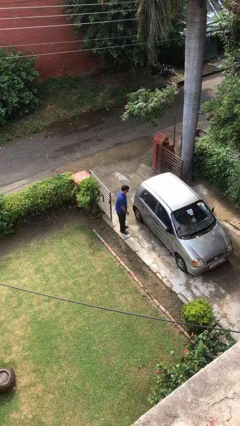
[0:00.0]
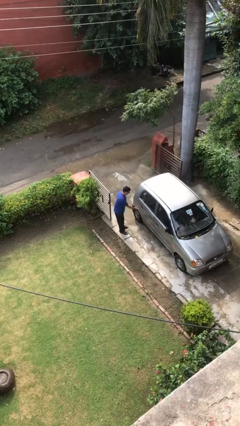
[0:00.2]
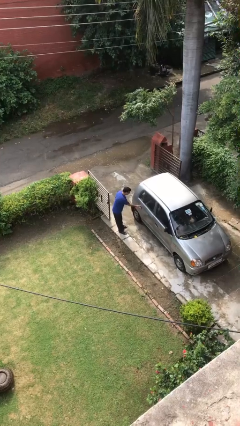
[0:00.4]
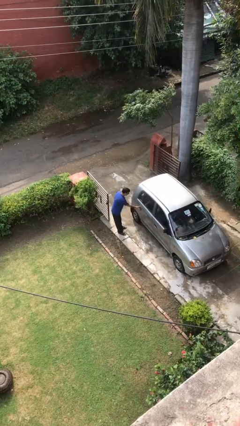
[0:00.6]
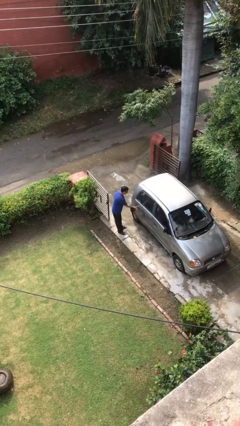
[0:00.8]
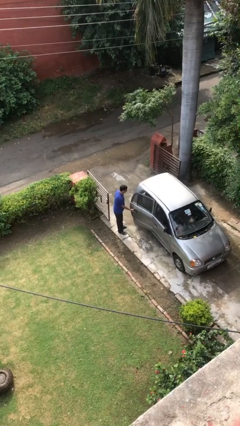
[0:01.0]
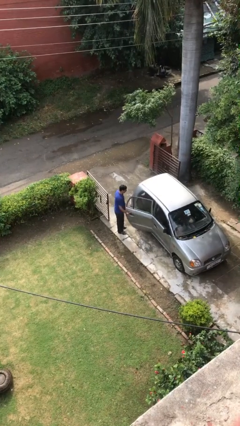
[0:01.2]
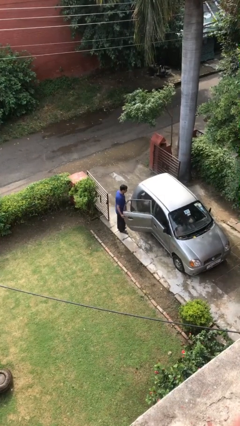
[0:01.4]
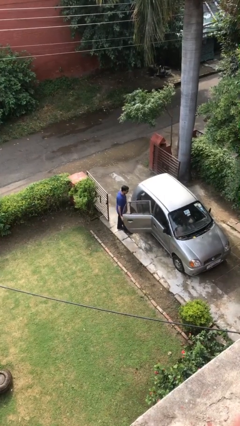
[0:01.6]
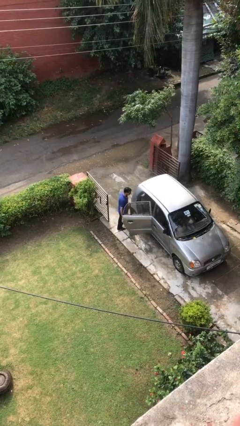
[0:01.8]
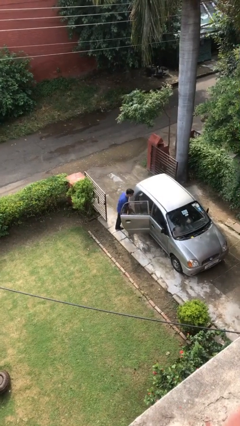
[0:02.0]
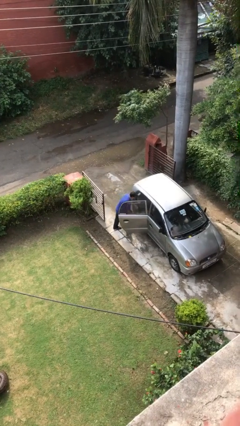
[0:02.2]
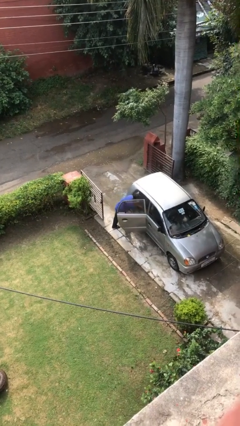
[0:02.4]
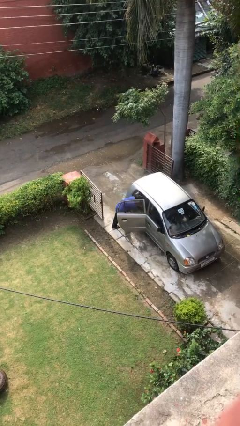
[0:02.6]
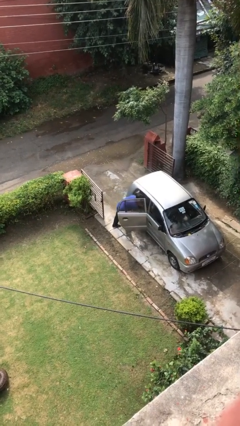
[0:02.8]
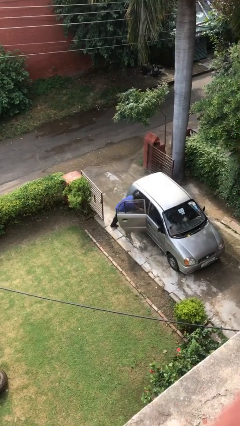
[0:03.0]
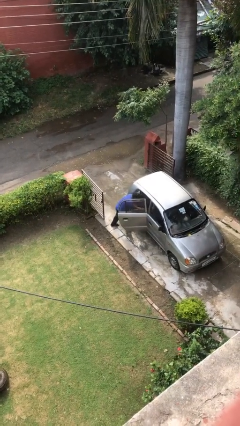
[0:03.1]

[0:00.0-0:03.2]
person opens car door

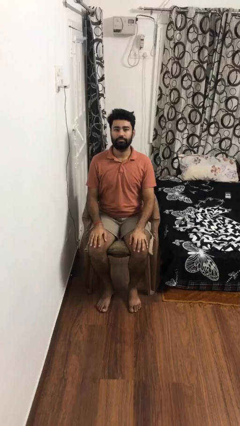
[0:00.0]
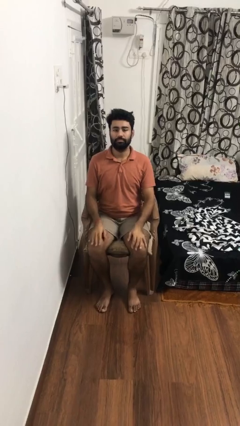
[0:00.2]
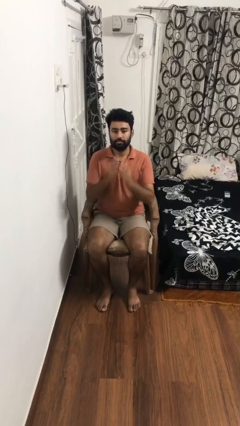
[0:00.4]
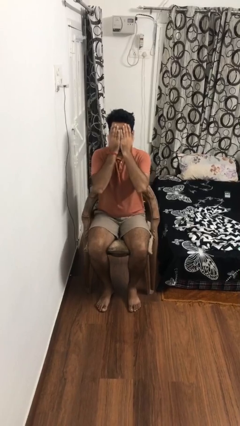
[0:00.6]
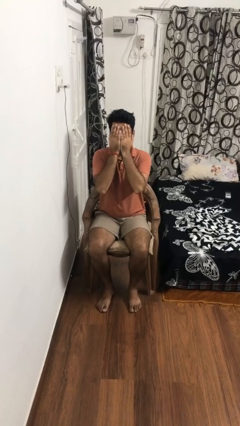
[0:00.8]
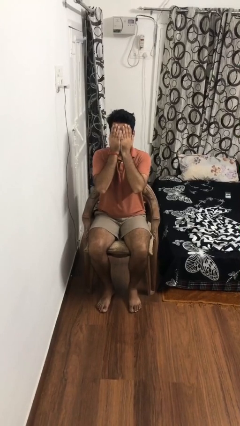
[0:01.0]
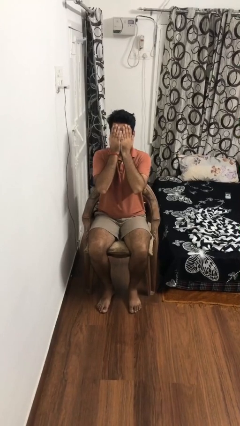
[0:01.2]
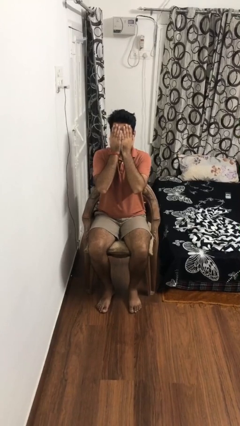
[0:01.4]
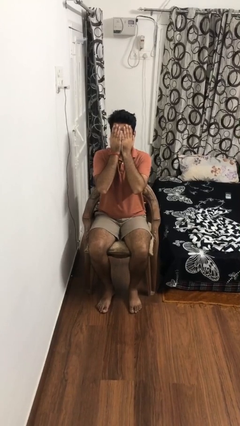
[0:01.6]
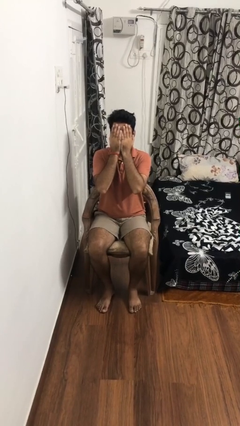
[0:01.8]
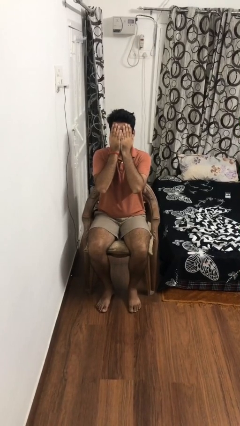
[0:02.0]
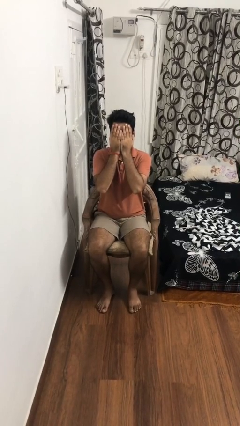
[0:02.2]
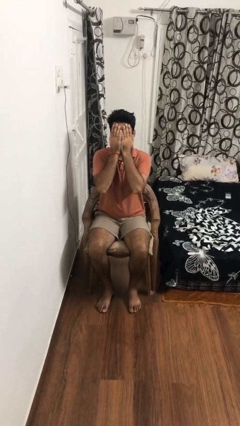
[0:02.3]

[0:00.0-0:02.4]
person covers face with hands

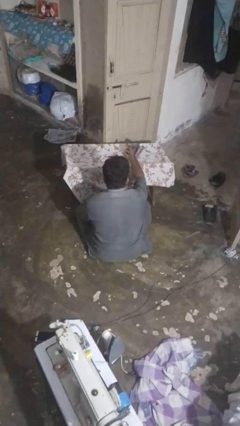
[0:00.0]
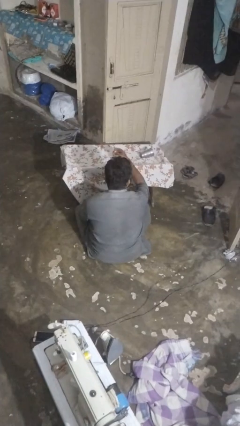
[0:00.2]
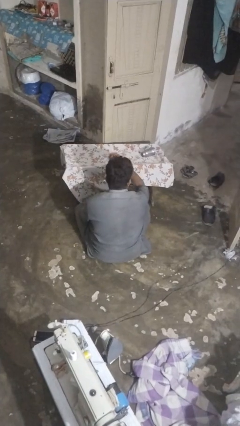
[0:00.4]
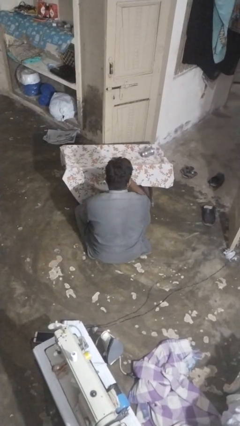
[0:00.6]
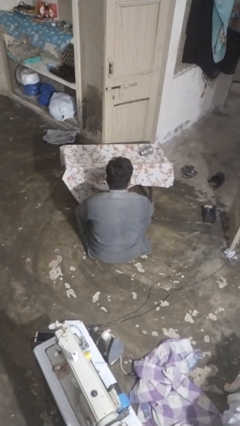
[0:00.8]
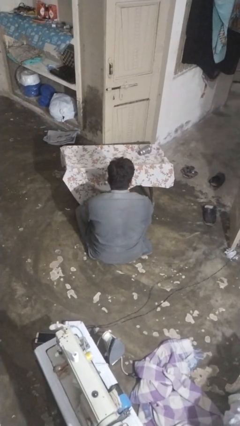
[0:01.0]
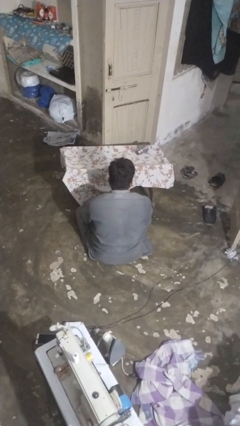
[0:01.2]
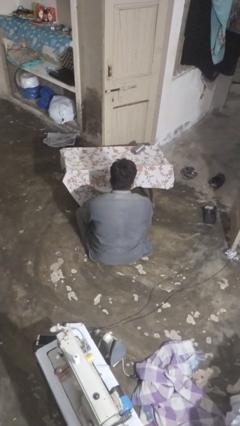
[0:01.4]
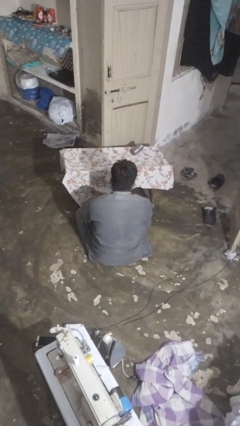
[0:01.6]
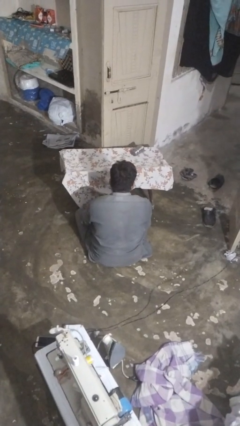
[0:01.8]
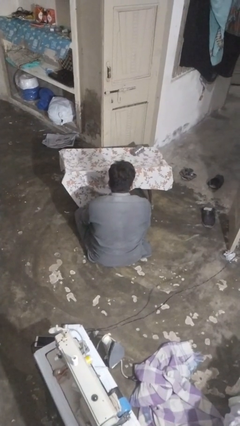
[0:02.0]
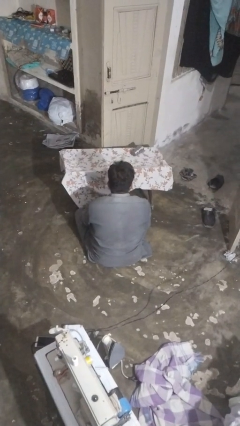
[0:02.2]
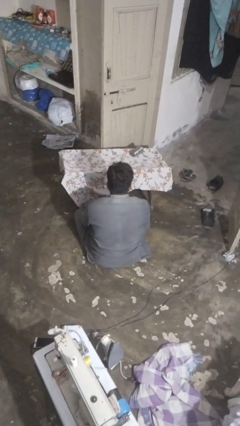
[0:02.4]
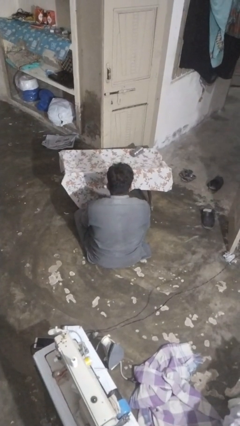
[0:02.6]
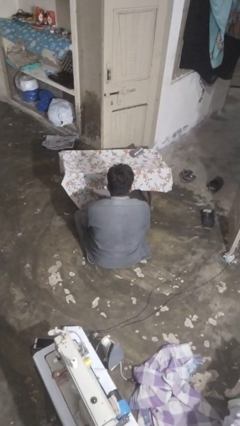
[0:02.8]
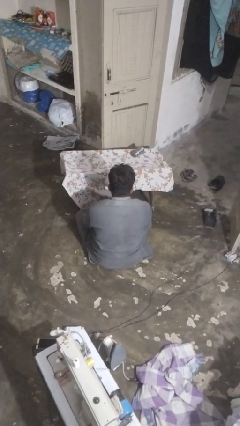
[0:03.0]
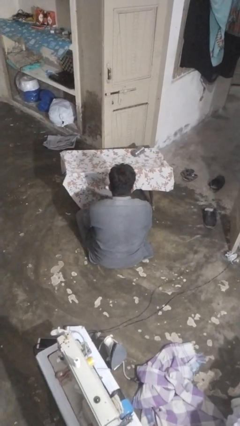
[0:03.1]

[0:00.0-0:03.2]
person knocks over glass

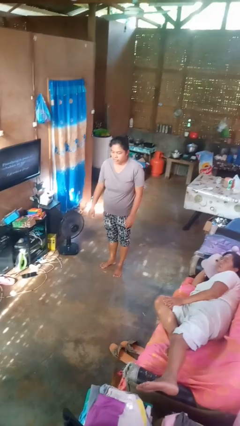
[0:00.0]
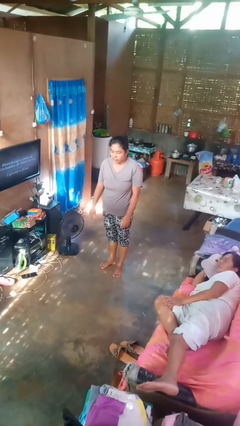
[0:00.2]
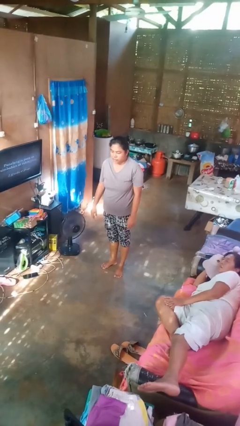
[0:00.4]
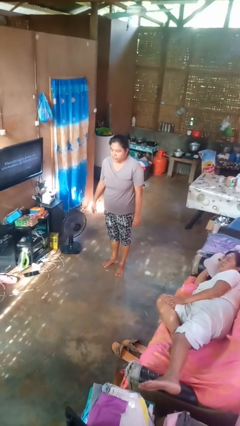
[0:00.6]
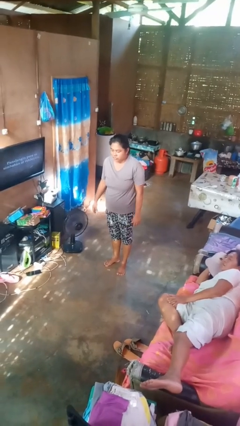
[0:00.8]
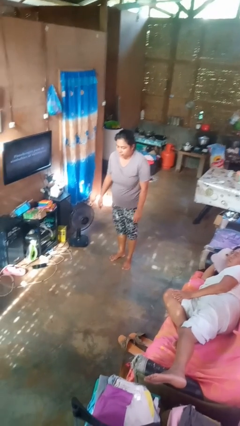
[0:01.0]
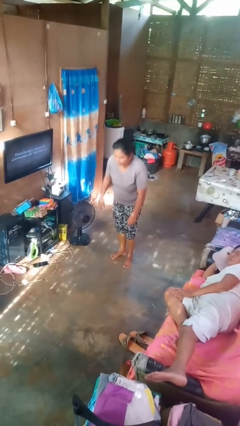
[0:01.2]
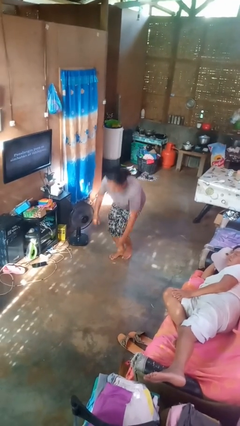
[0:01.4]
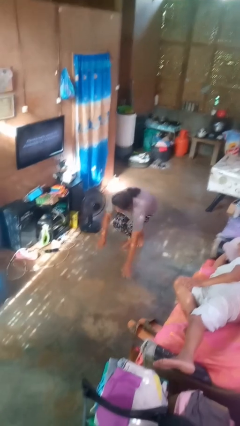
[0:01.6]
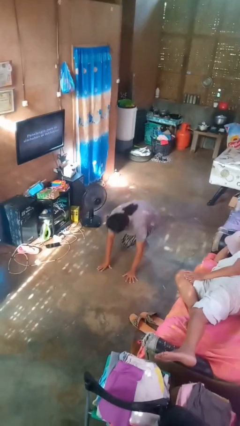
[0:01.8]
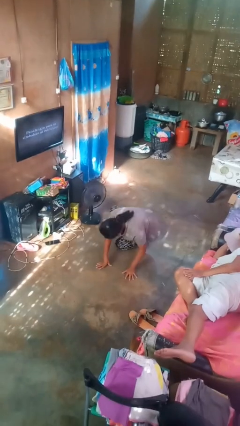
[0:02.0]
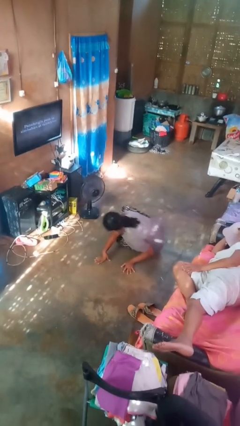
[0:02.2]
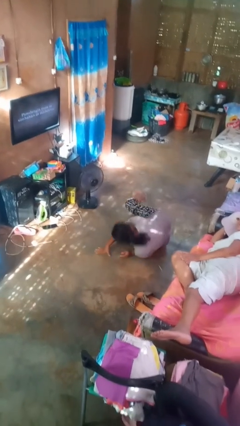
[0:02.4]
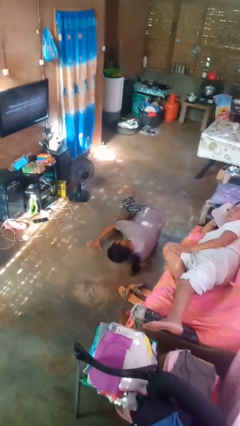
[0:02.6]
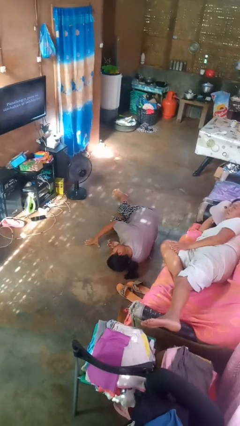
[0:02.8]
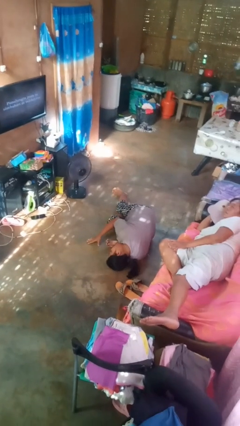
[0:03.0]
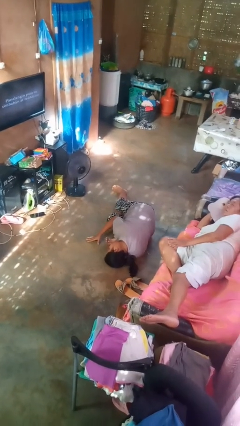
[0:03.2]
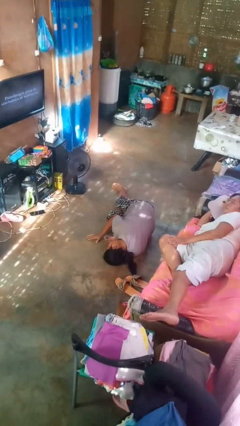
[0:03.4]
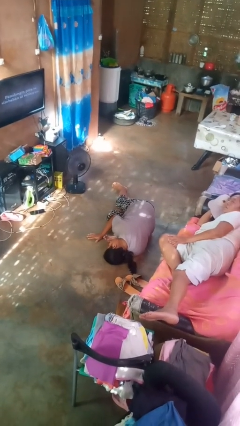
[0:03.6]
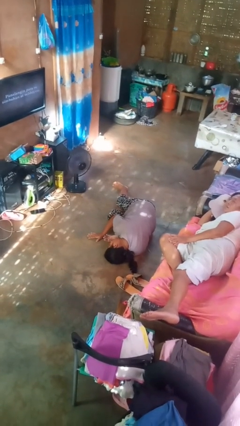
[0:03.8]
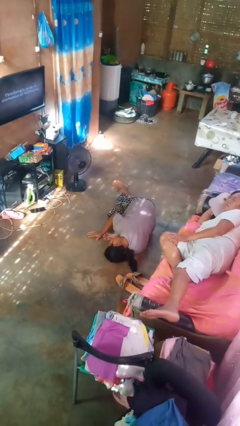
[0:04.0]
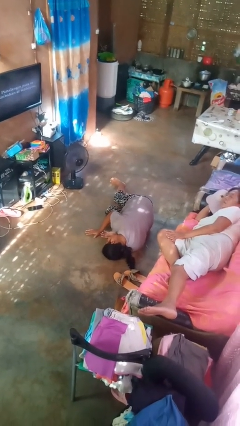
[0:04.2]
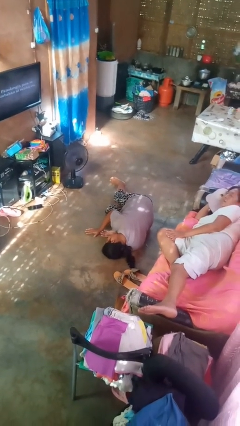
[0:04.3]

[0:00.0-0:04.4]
person falls while standing

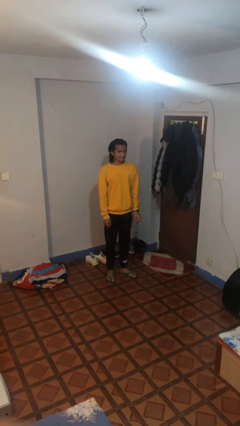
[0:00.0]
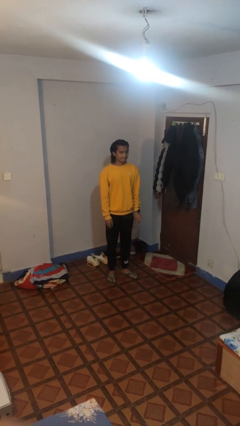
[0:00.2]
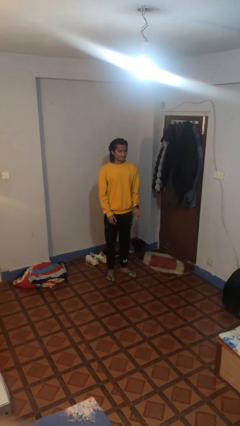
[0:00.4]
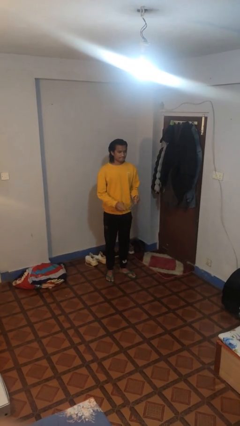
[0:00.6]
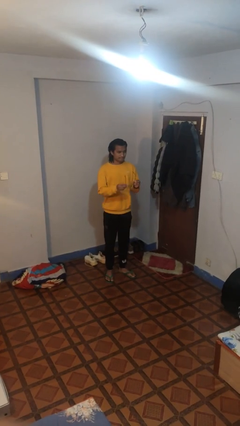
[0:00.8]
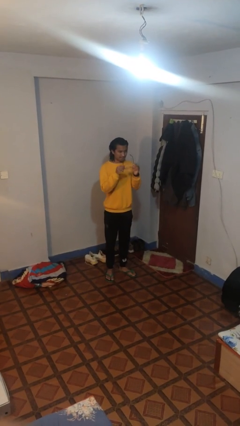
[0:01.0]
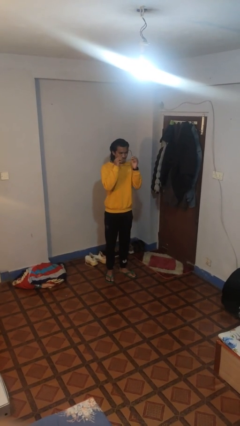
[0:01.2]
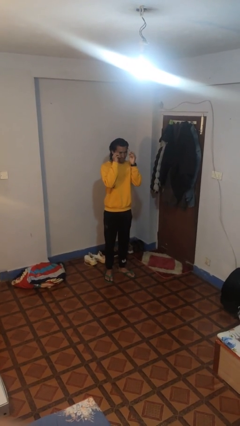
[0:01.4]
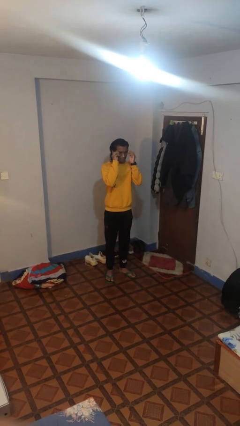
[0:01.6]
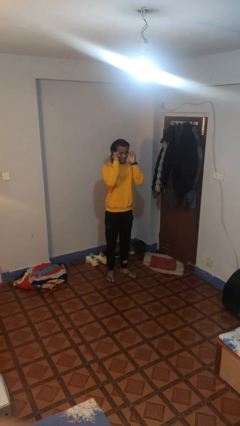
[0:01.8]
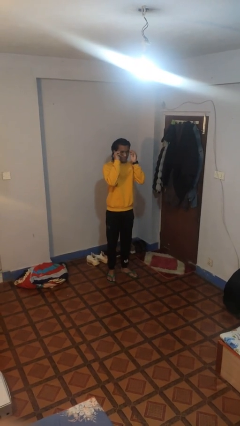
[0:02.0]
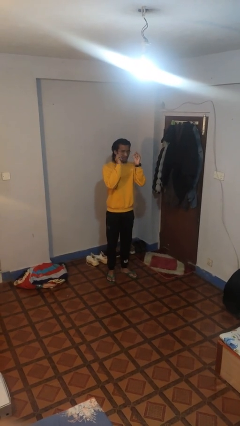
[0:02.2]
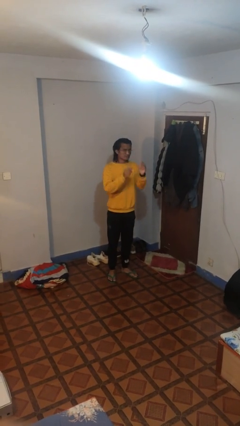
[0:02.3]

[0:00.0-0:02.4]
person puts on glasses

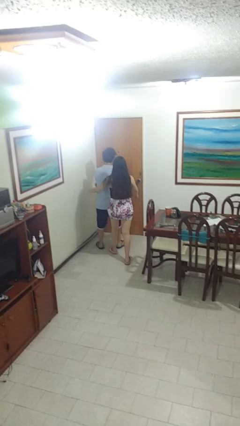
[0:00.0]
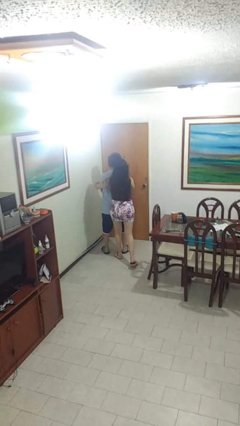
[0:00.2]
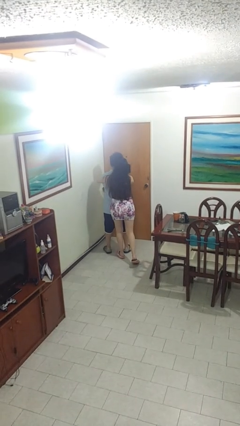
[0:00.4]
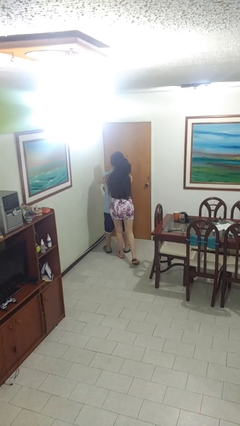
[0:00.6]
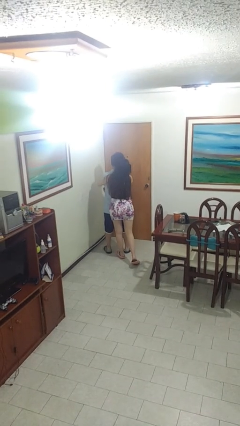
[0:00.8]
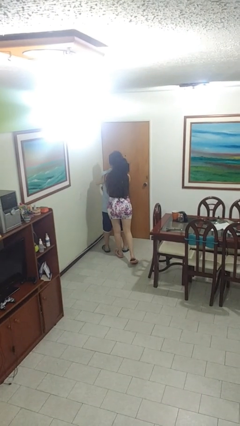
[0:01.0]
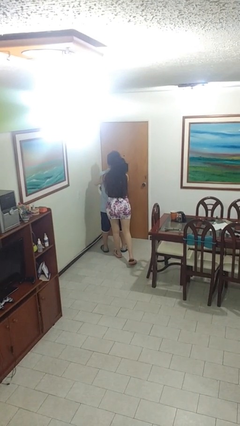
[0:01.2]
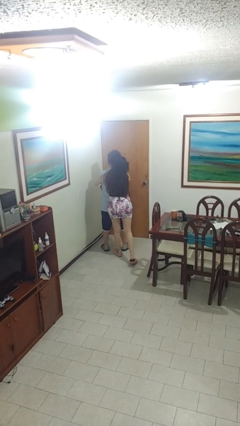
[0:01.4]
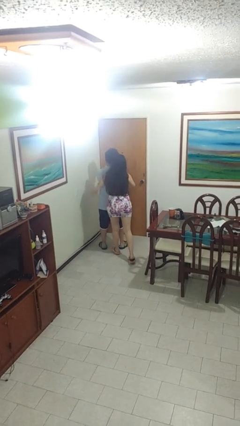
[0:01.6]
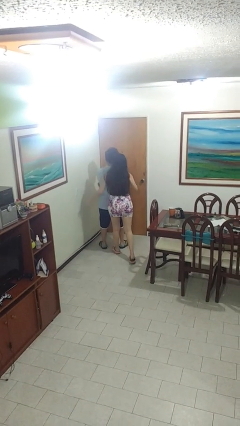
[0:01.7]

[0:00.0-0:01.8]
person hugs person from behind

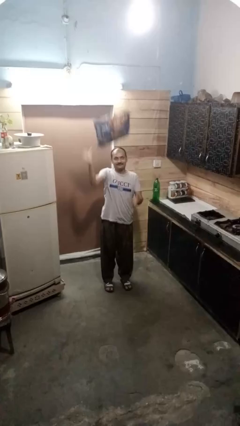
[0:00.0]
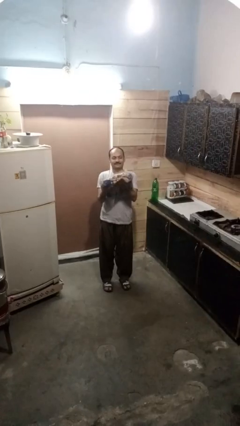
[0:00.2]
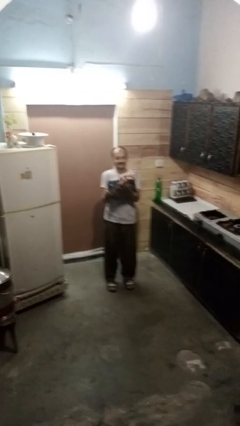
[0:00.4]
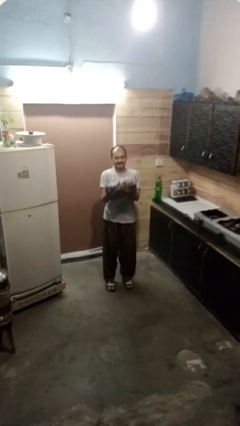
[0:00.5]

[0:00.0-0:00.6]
person drops object
